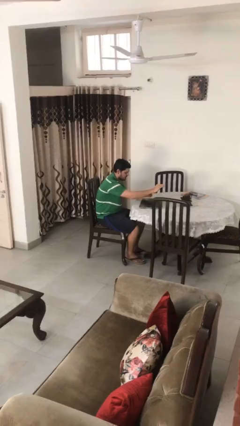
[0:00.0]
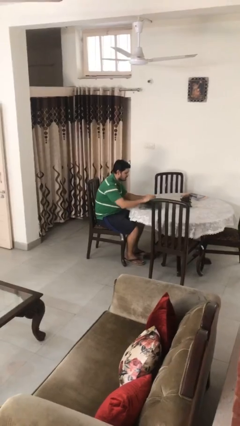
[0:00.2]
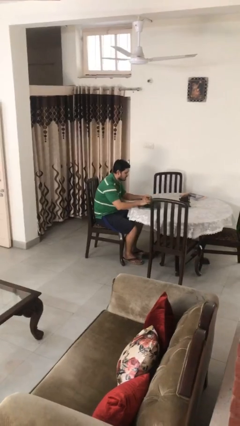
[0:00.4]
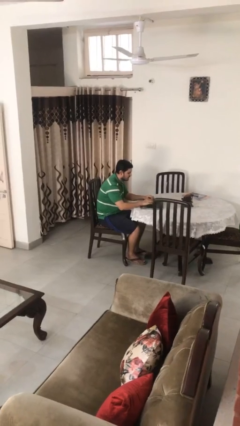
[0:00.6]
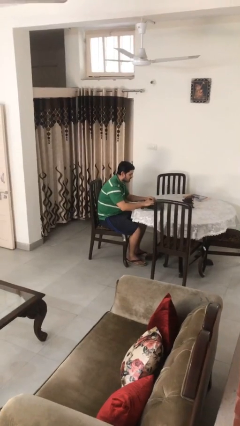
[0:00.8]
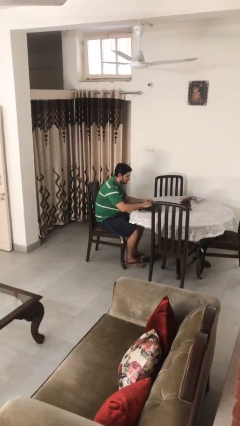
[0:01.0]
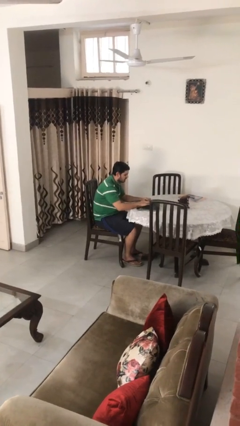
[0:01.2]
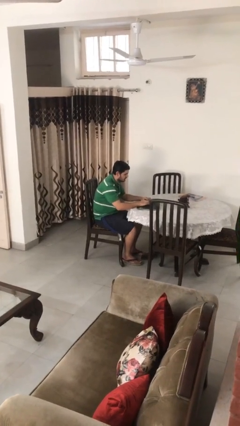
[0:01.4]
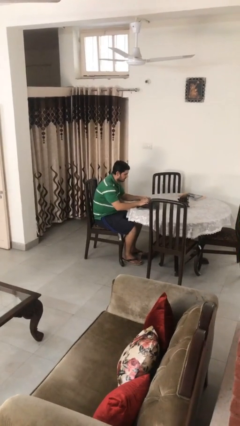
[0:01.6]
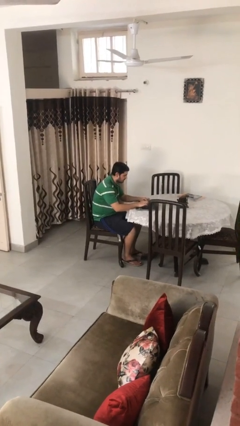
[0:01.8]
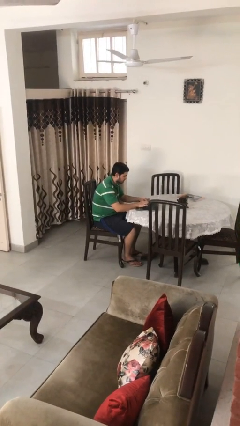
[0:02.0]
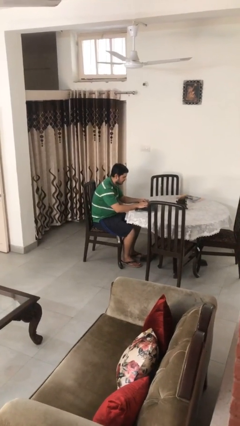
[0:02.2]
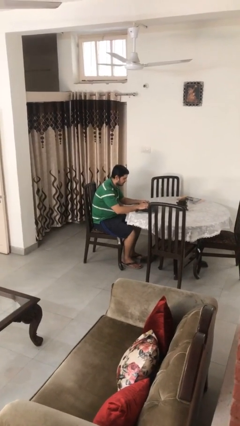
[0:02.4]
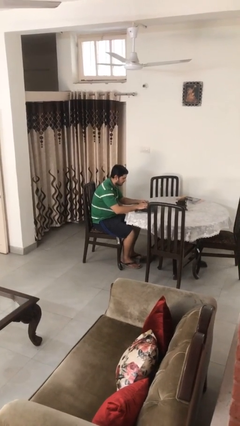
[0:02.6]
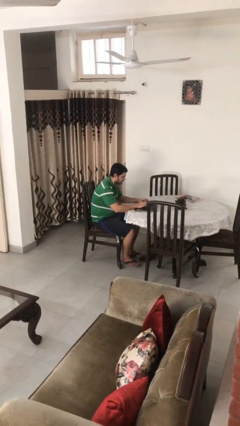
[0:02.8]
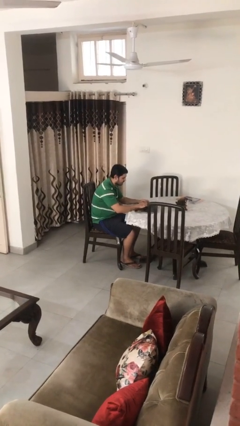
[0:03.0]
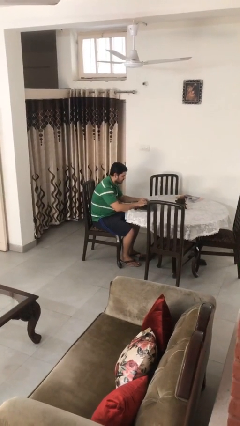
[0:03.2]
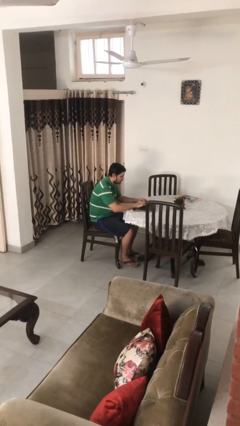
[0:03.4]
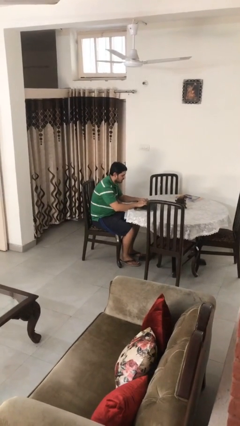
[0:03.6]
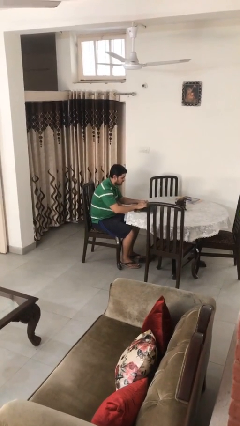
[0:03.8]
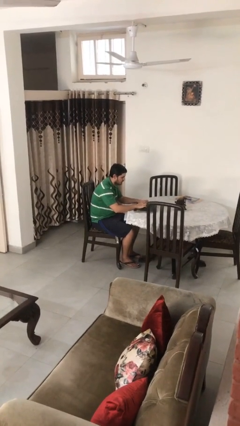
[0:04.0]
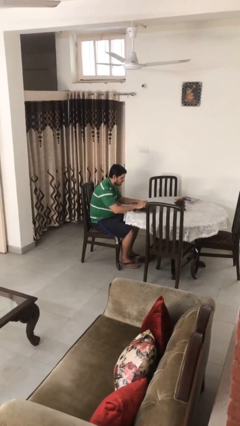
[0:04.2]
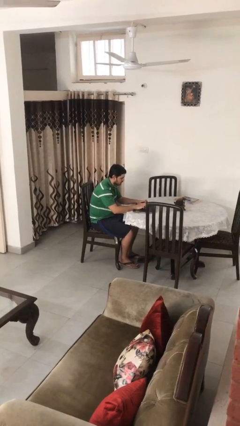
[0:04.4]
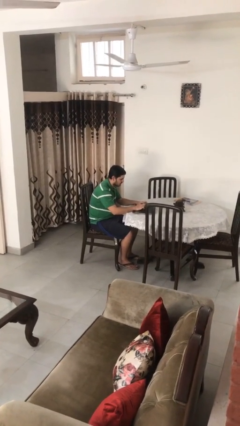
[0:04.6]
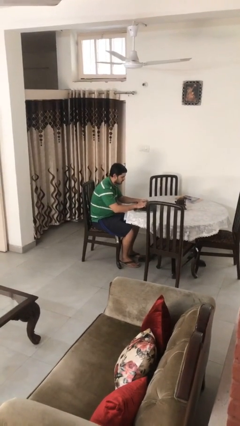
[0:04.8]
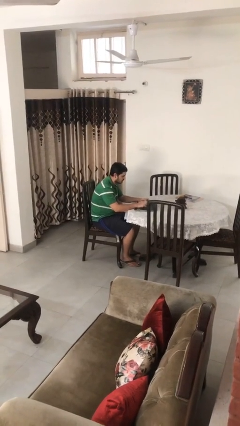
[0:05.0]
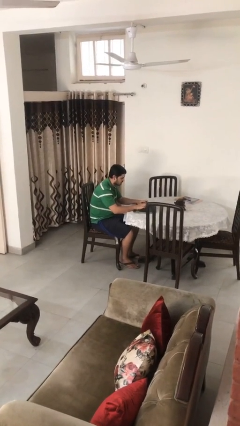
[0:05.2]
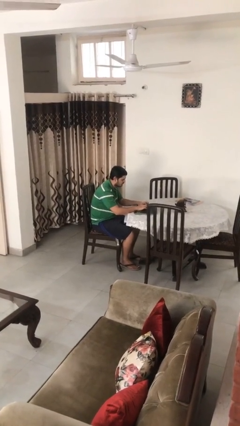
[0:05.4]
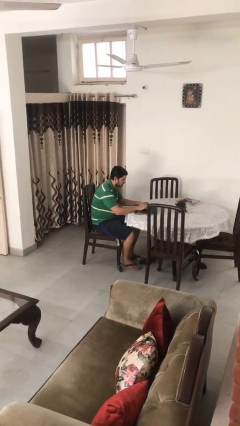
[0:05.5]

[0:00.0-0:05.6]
person interacts with laptop

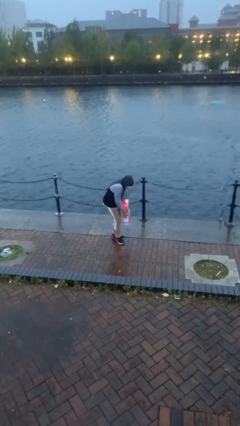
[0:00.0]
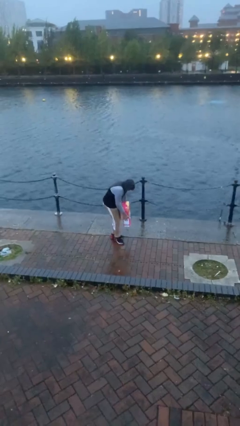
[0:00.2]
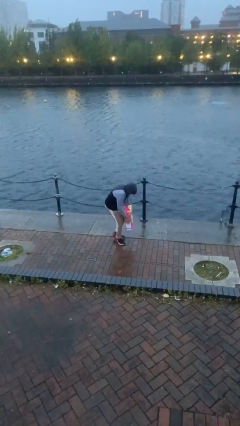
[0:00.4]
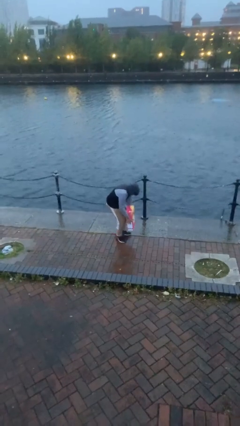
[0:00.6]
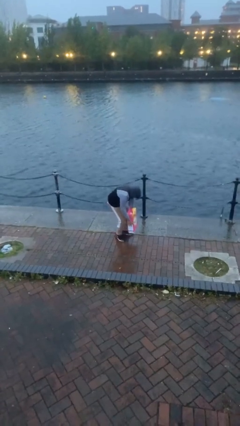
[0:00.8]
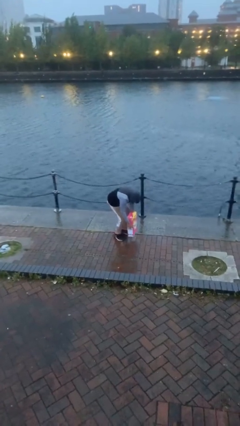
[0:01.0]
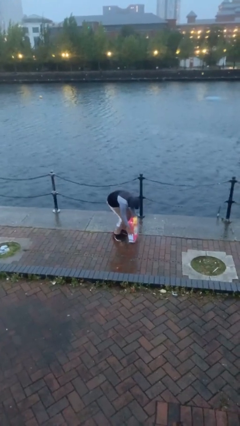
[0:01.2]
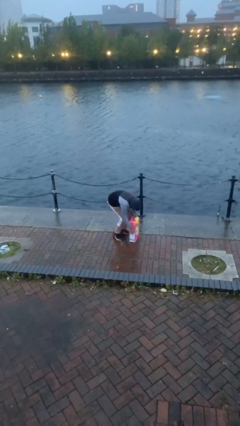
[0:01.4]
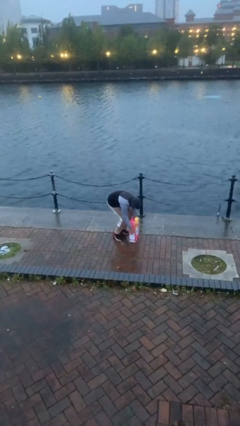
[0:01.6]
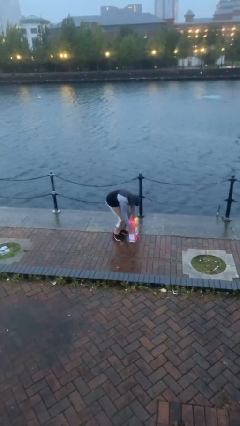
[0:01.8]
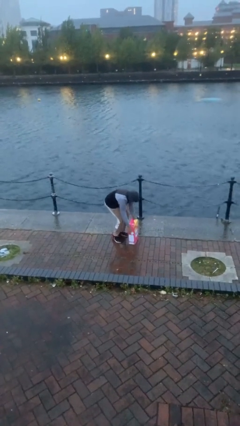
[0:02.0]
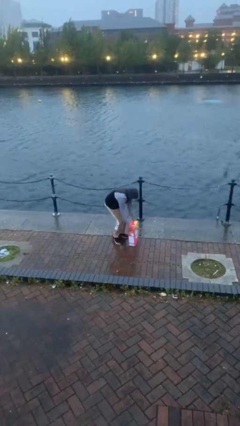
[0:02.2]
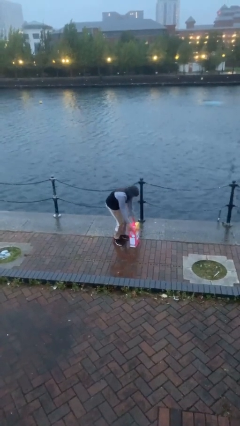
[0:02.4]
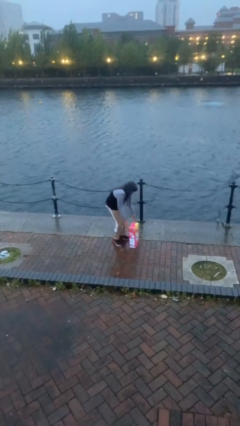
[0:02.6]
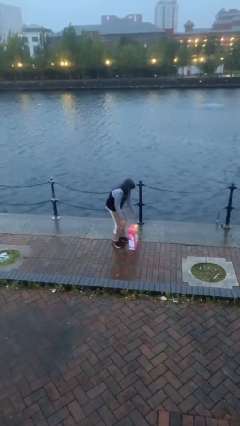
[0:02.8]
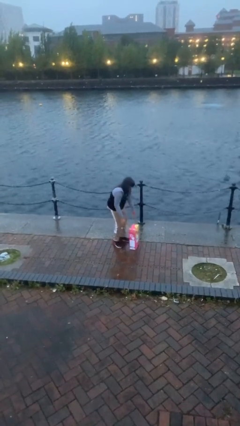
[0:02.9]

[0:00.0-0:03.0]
person puts down object on floor

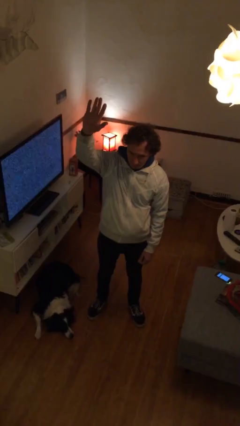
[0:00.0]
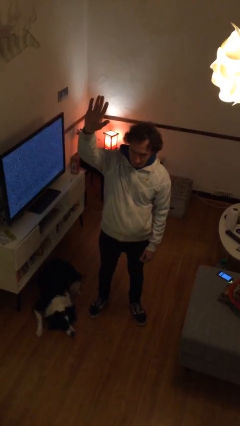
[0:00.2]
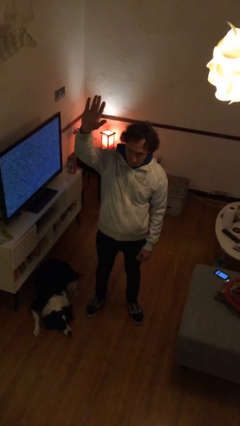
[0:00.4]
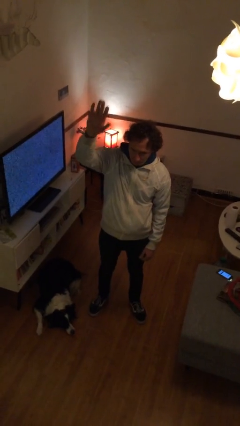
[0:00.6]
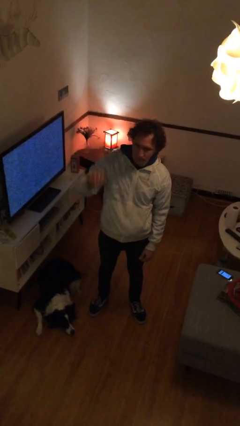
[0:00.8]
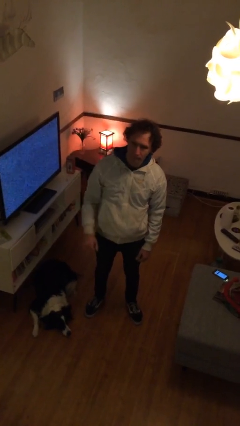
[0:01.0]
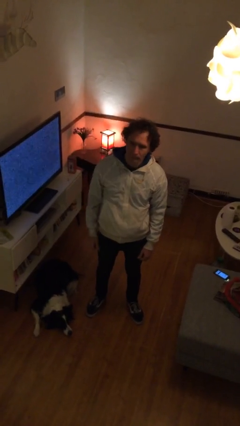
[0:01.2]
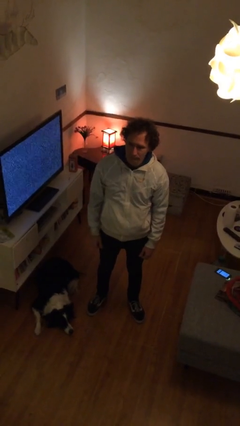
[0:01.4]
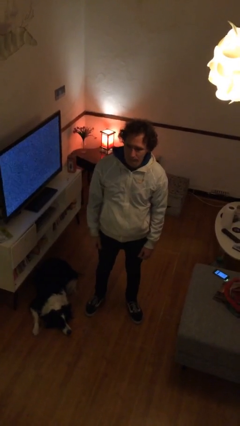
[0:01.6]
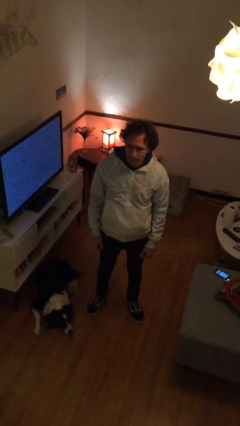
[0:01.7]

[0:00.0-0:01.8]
person gestures lower hand

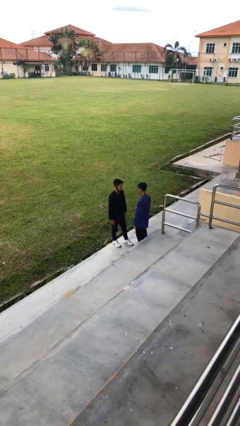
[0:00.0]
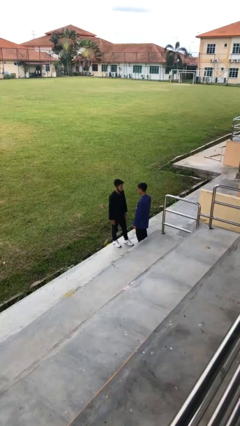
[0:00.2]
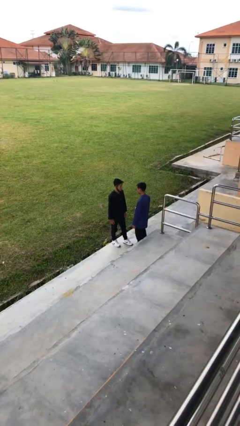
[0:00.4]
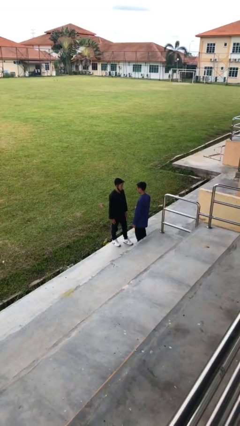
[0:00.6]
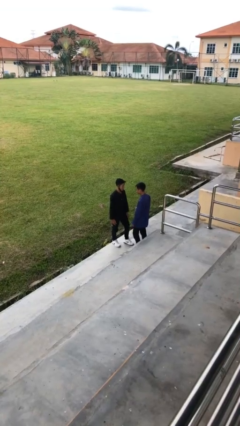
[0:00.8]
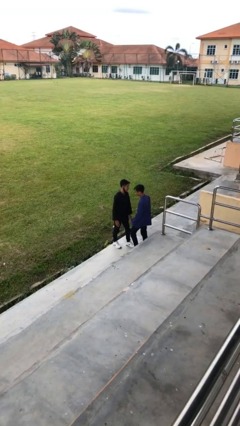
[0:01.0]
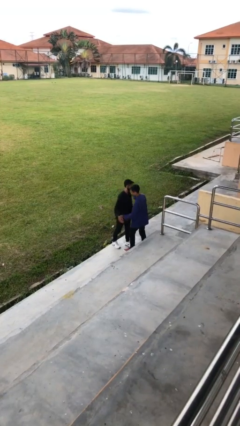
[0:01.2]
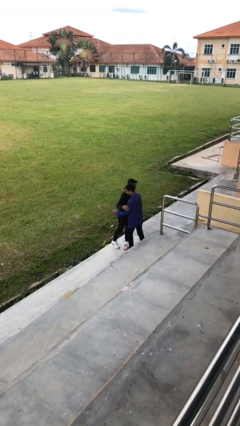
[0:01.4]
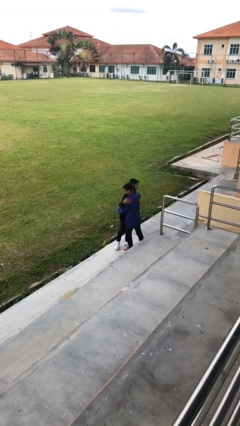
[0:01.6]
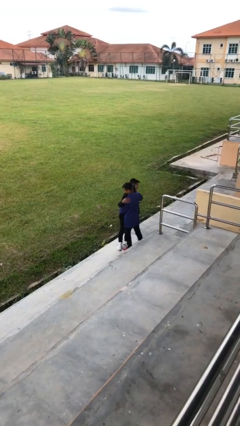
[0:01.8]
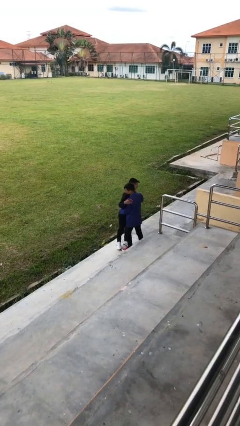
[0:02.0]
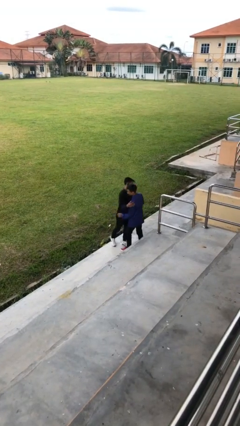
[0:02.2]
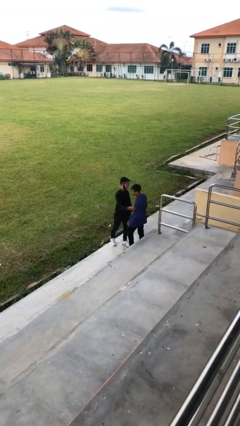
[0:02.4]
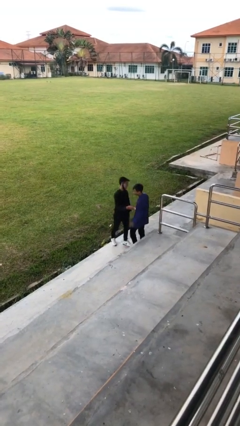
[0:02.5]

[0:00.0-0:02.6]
person embraces person

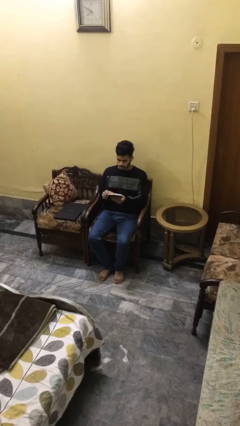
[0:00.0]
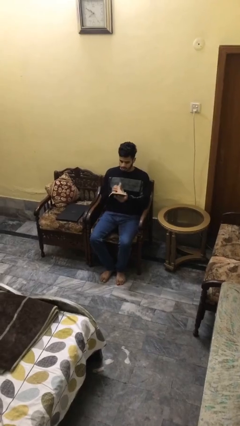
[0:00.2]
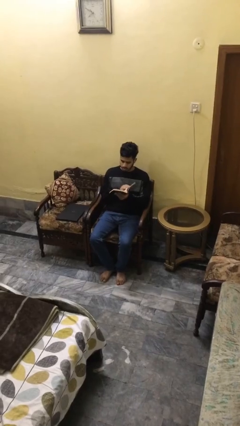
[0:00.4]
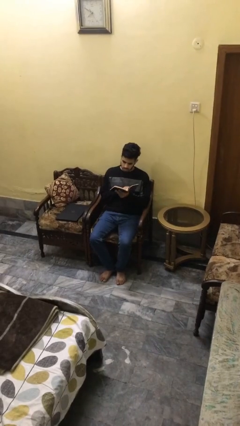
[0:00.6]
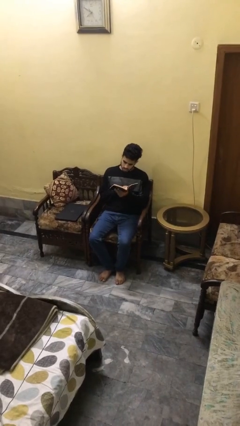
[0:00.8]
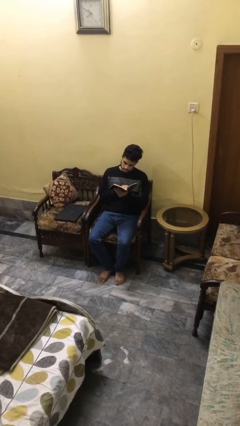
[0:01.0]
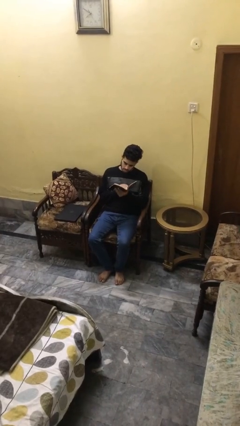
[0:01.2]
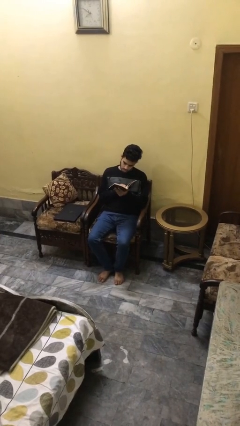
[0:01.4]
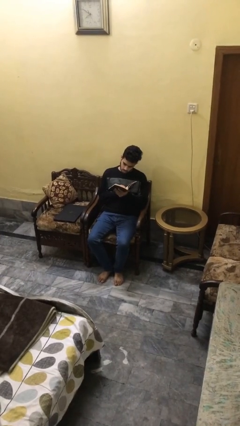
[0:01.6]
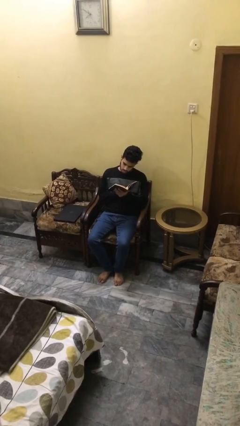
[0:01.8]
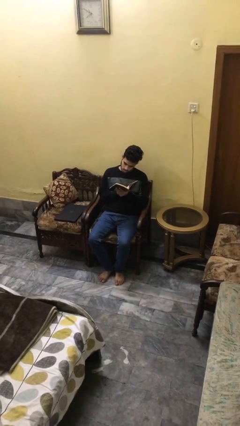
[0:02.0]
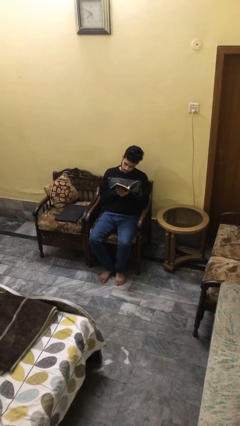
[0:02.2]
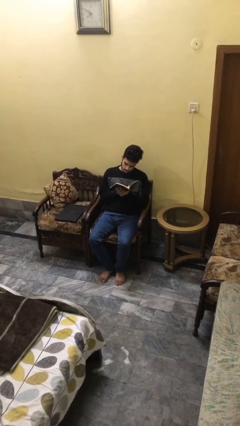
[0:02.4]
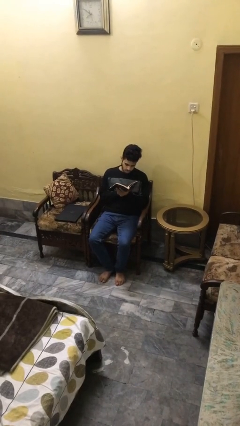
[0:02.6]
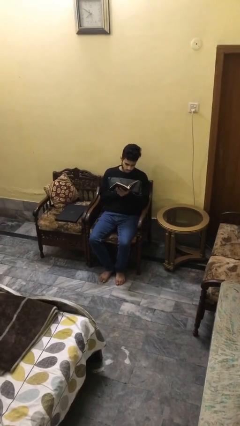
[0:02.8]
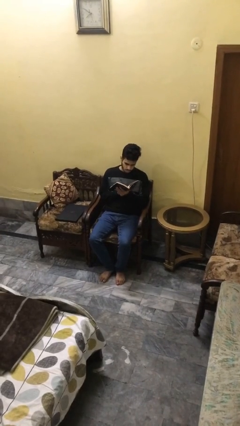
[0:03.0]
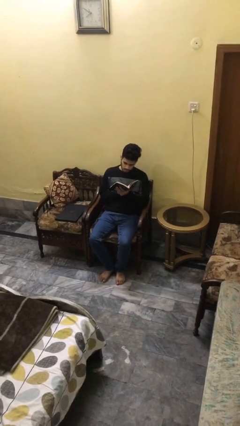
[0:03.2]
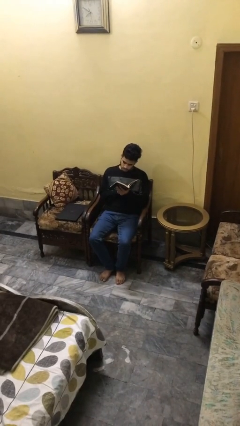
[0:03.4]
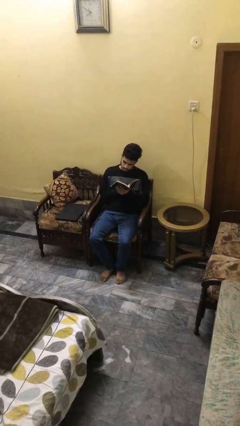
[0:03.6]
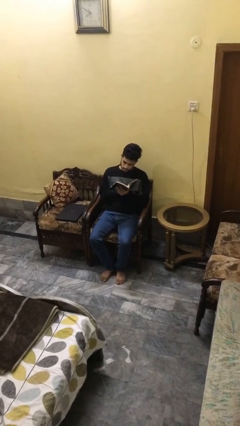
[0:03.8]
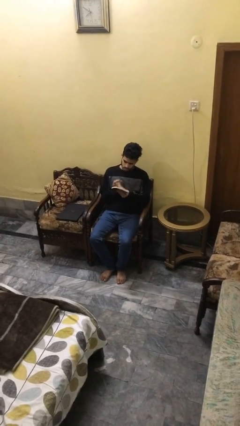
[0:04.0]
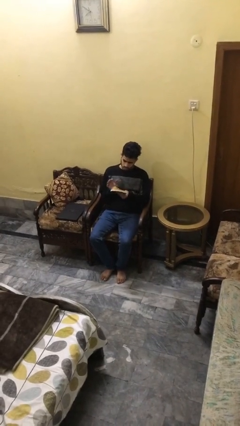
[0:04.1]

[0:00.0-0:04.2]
person reads document

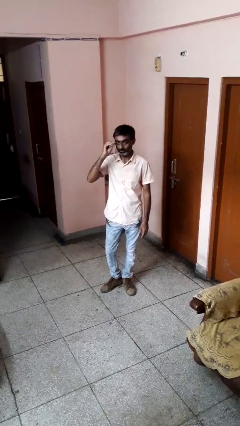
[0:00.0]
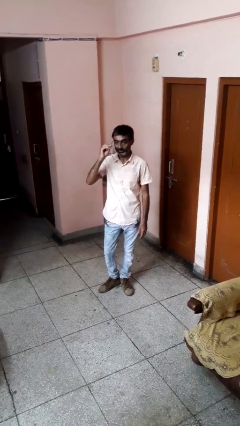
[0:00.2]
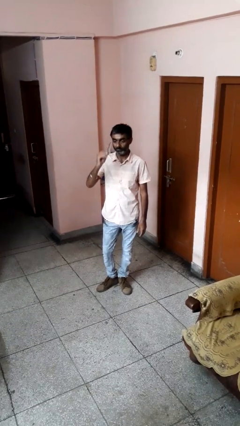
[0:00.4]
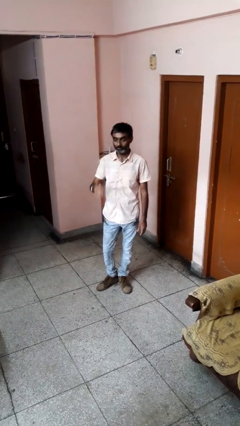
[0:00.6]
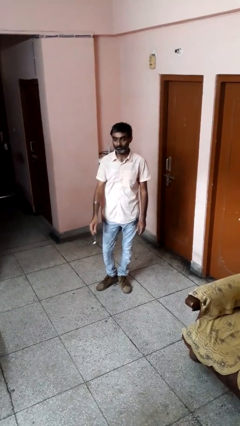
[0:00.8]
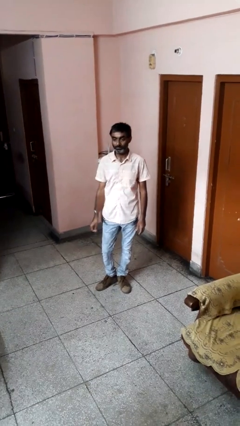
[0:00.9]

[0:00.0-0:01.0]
person takes off glasses
